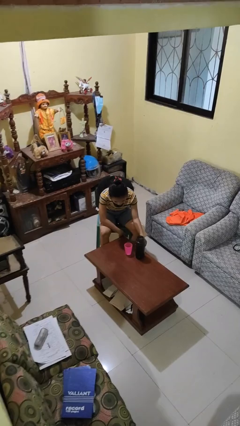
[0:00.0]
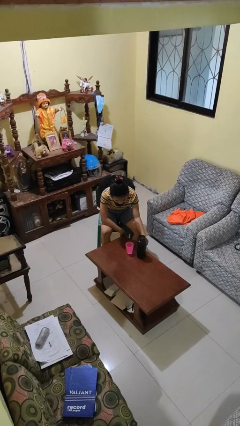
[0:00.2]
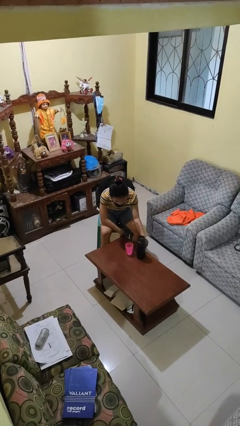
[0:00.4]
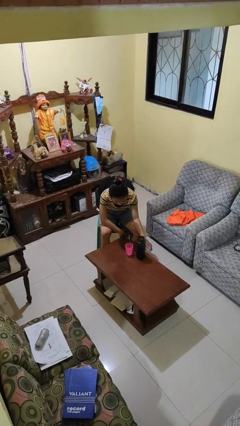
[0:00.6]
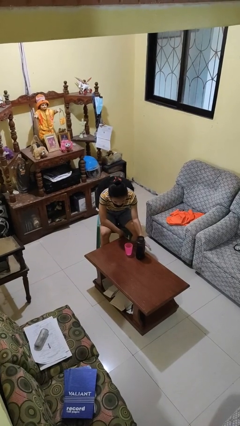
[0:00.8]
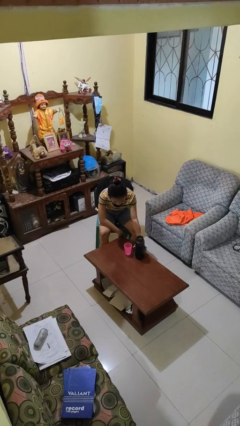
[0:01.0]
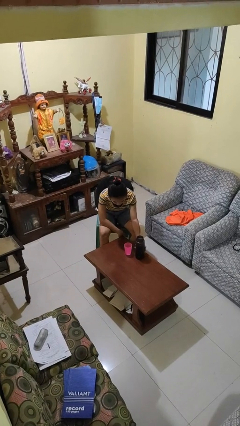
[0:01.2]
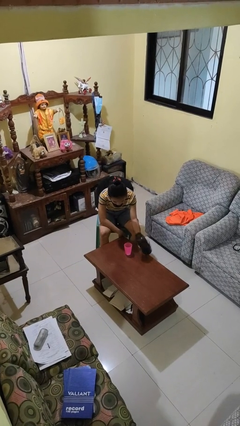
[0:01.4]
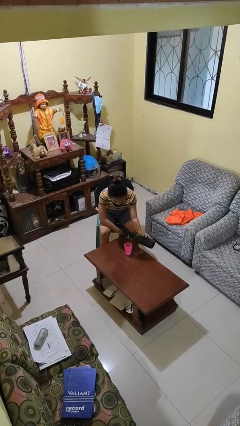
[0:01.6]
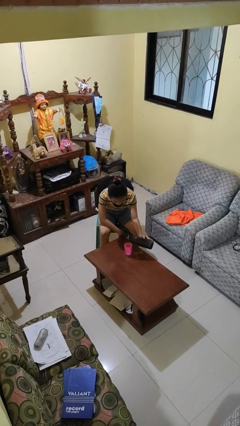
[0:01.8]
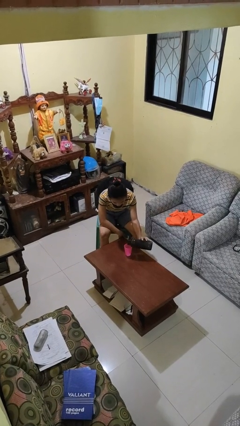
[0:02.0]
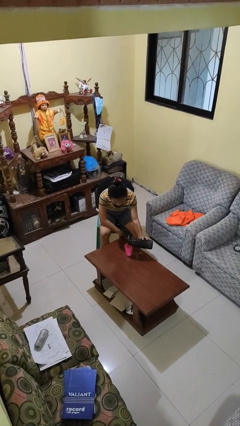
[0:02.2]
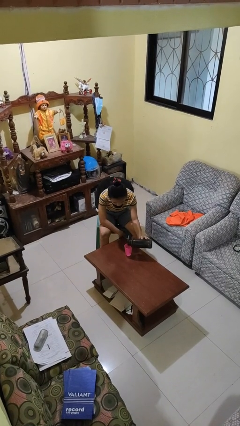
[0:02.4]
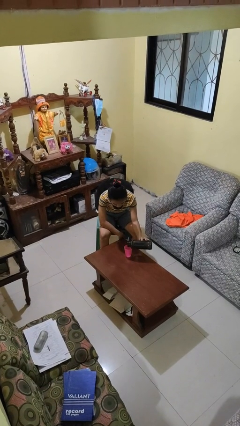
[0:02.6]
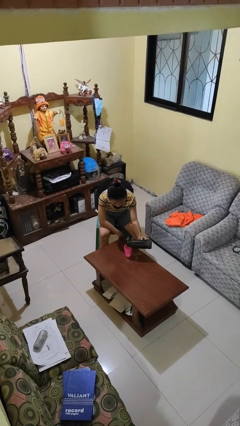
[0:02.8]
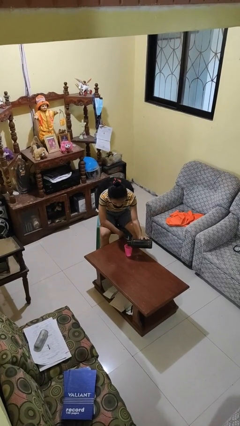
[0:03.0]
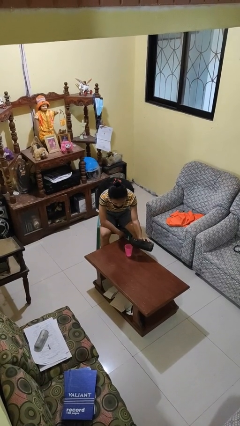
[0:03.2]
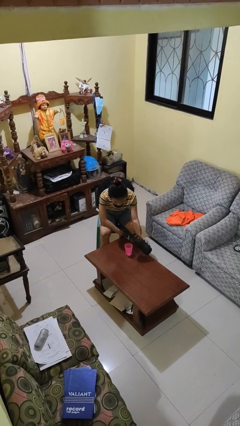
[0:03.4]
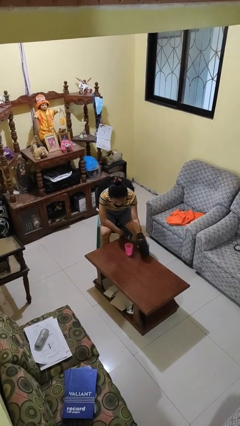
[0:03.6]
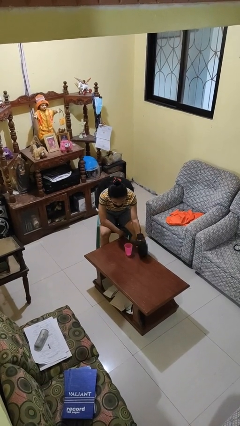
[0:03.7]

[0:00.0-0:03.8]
person pours liquid into cup

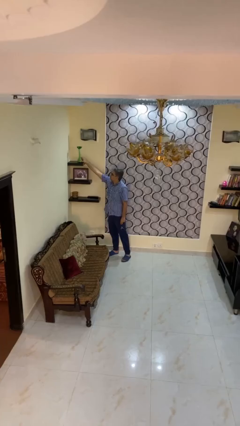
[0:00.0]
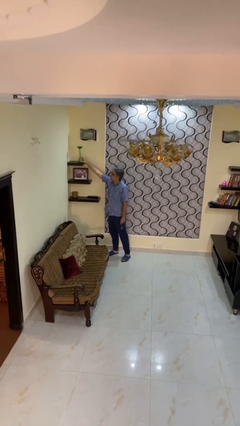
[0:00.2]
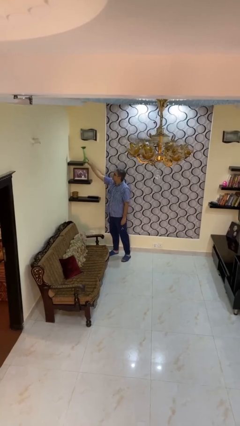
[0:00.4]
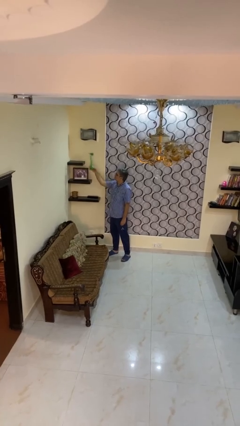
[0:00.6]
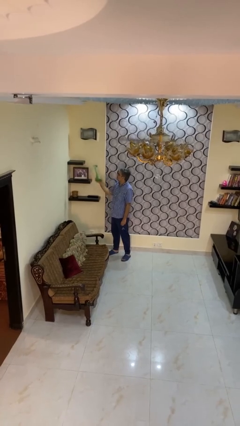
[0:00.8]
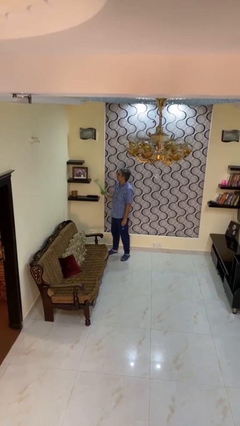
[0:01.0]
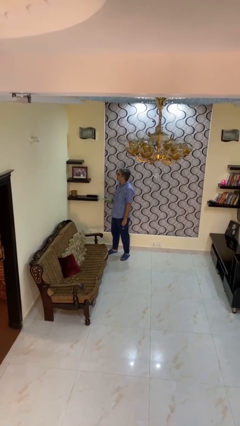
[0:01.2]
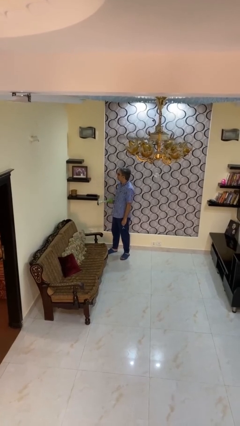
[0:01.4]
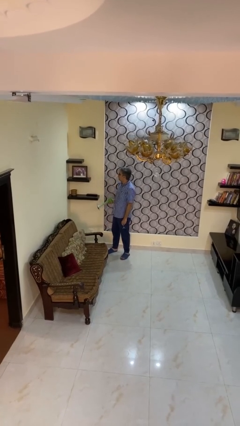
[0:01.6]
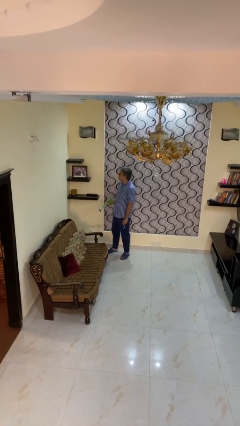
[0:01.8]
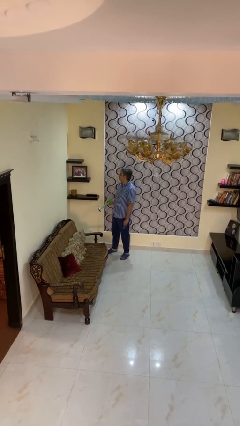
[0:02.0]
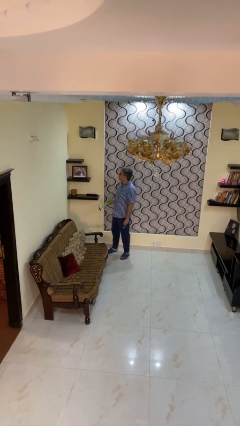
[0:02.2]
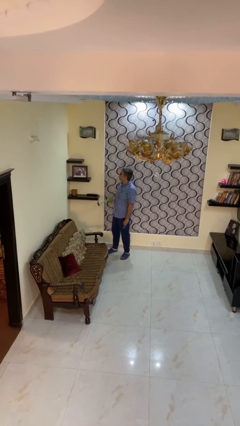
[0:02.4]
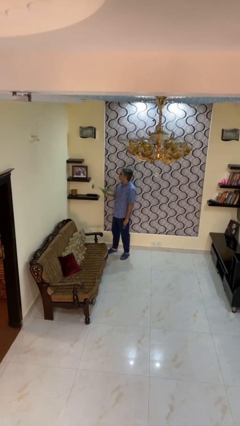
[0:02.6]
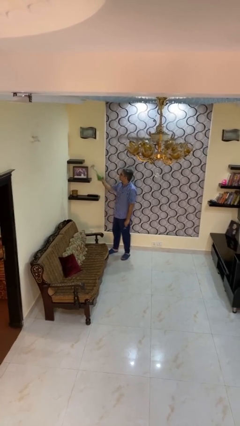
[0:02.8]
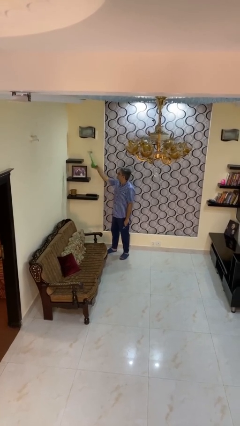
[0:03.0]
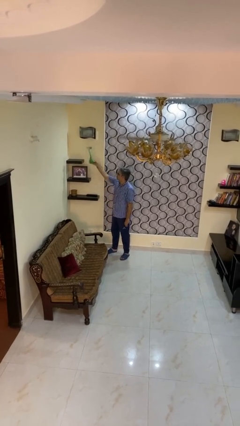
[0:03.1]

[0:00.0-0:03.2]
person picks up object from shelf

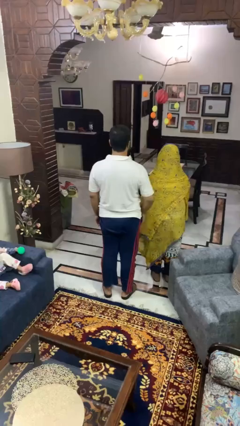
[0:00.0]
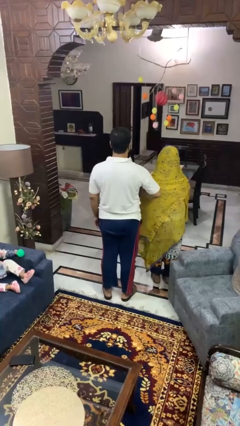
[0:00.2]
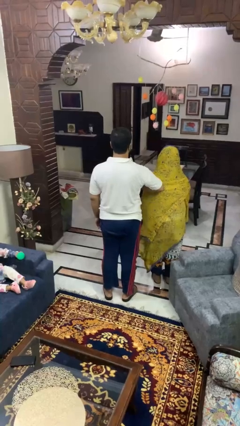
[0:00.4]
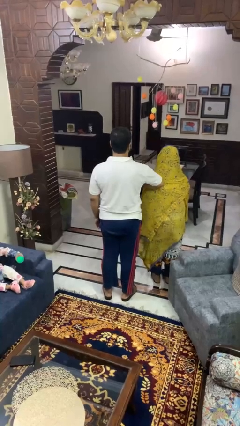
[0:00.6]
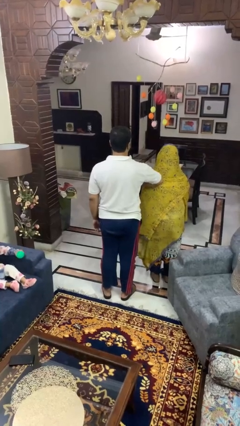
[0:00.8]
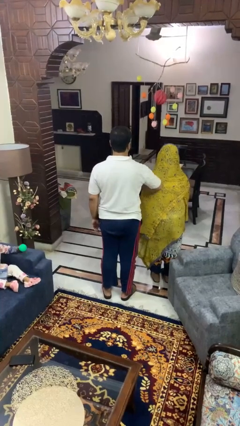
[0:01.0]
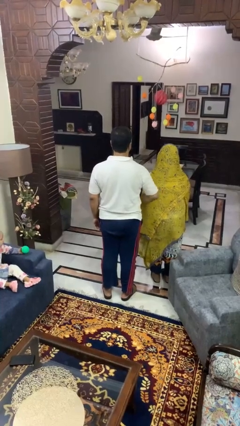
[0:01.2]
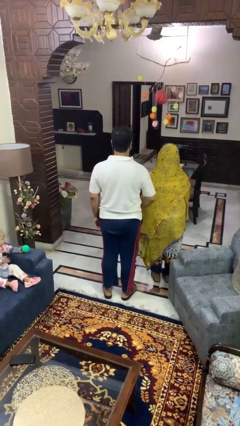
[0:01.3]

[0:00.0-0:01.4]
person nudges person with elbow

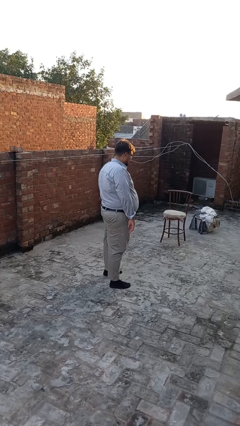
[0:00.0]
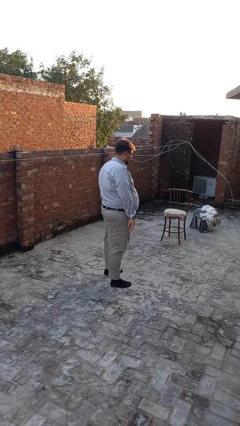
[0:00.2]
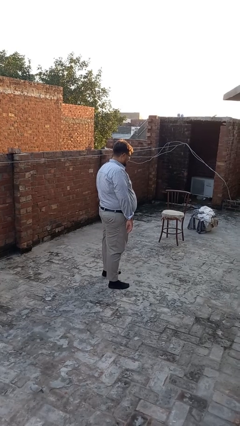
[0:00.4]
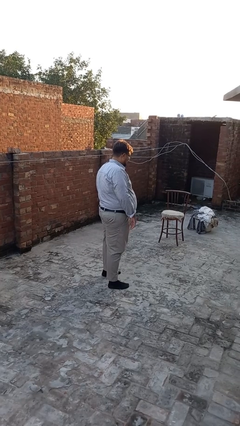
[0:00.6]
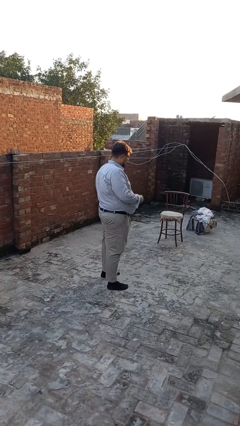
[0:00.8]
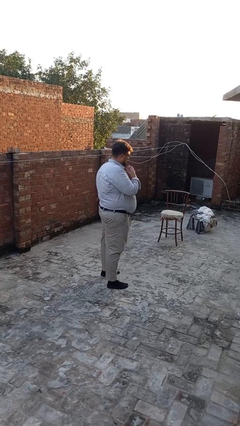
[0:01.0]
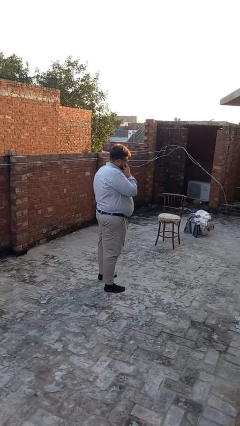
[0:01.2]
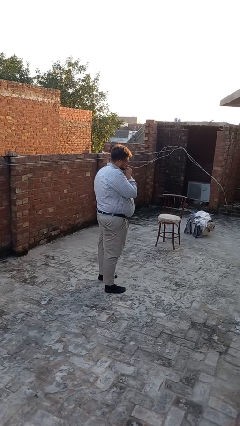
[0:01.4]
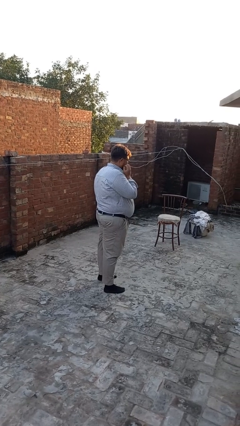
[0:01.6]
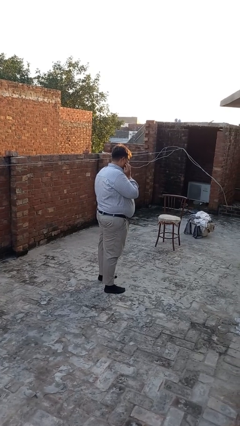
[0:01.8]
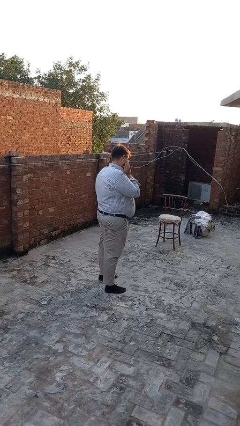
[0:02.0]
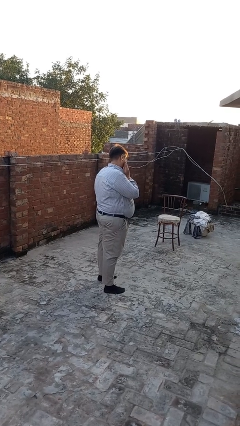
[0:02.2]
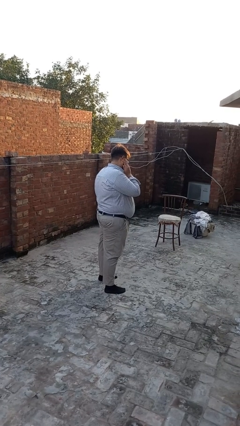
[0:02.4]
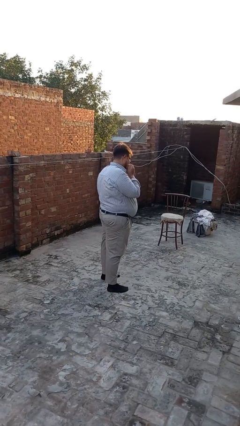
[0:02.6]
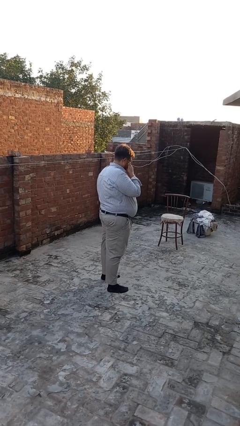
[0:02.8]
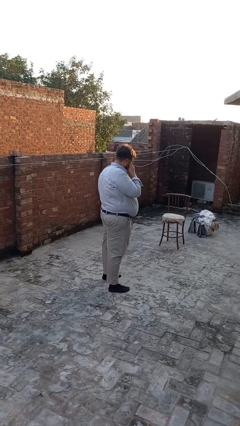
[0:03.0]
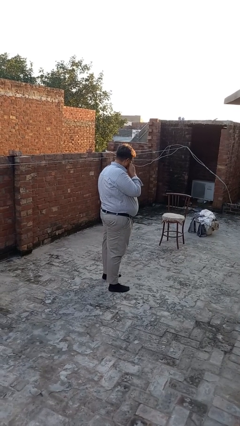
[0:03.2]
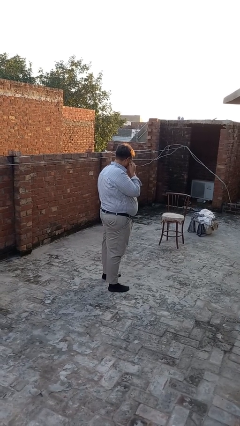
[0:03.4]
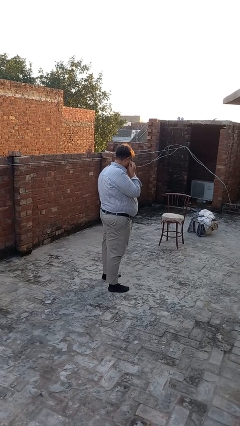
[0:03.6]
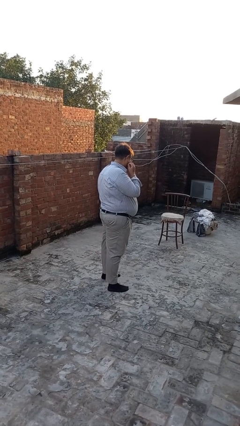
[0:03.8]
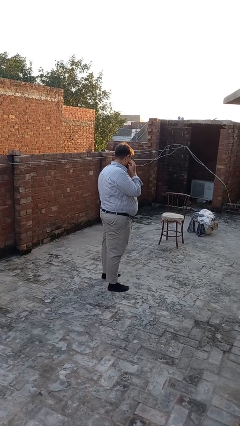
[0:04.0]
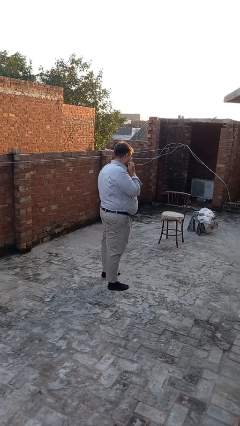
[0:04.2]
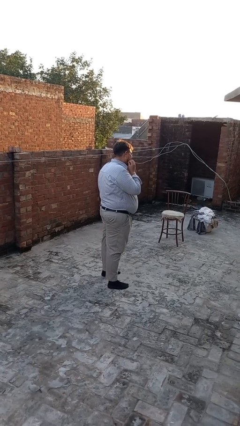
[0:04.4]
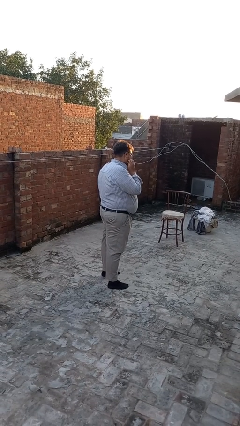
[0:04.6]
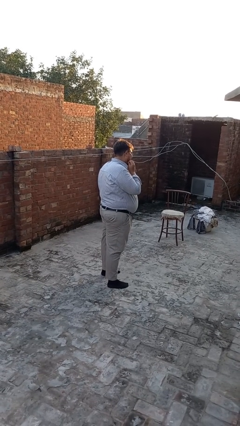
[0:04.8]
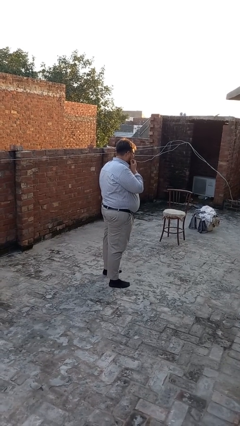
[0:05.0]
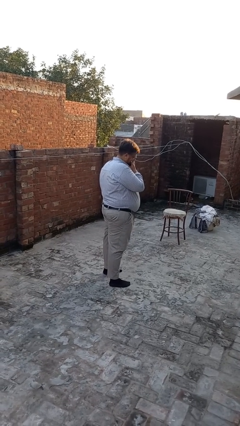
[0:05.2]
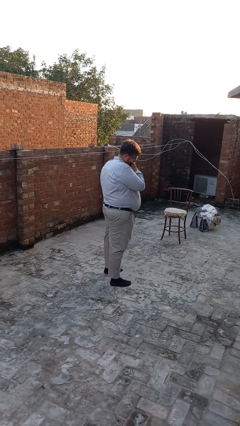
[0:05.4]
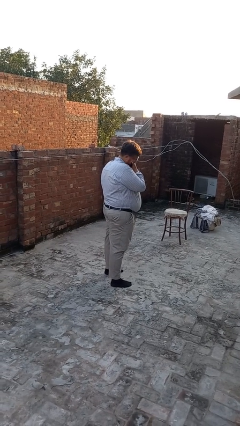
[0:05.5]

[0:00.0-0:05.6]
person scratches face

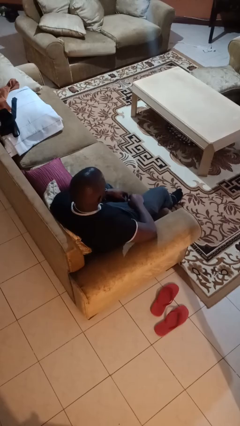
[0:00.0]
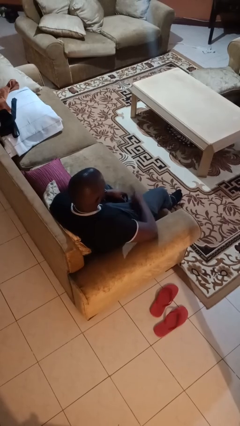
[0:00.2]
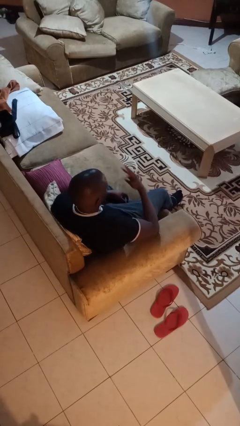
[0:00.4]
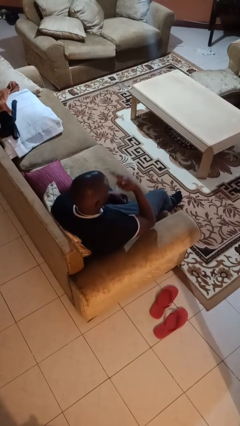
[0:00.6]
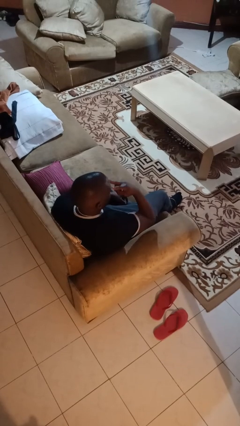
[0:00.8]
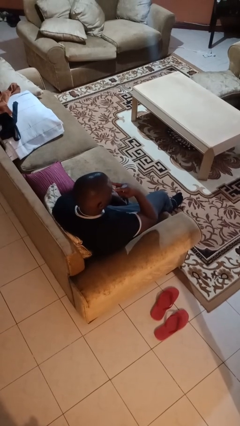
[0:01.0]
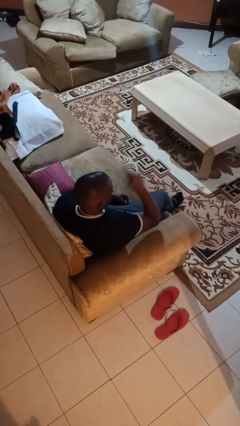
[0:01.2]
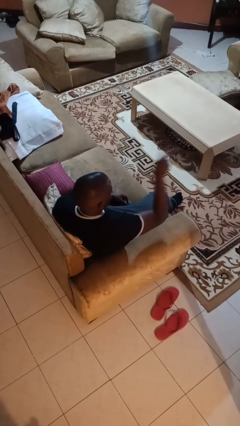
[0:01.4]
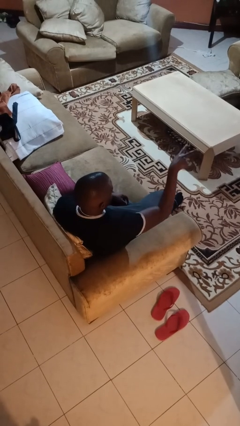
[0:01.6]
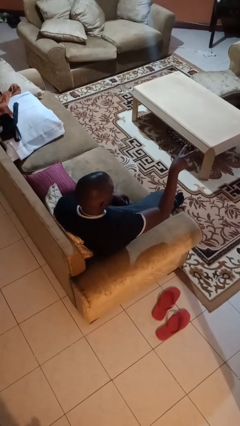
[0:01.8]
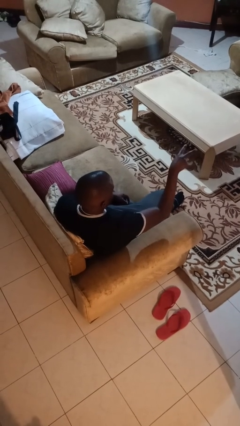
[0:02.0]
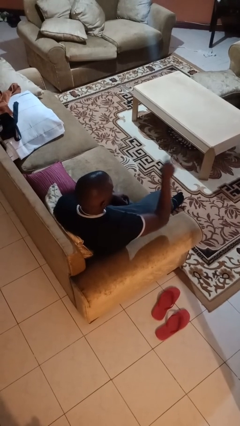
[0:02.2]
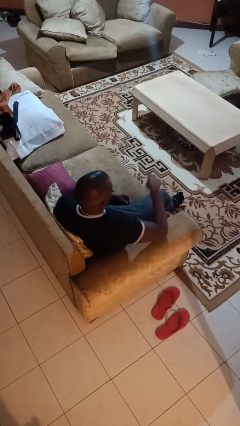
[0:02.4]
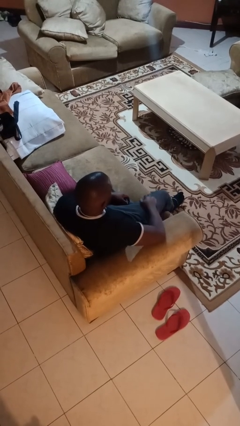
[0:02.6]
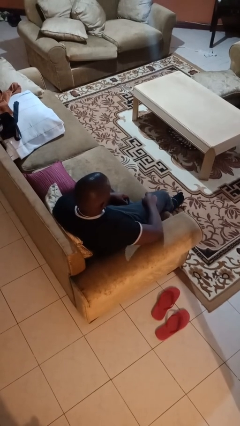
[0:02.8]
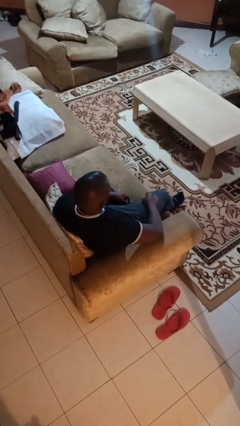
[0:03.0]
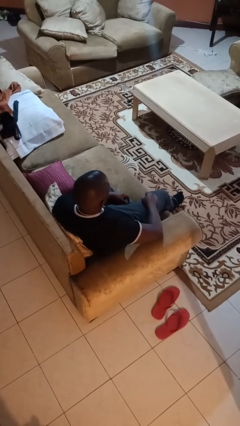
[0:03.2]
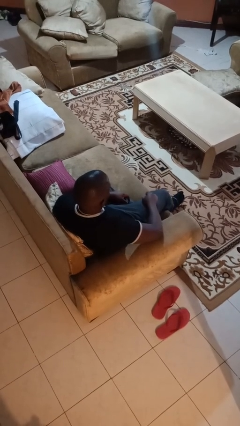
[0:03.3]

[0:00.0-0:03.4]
person gestures watch closely
